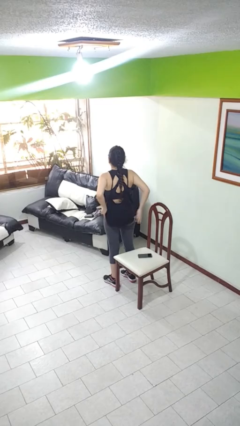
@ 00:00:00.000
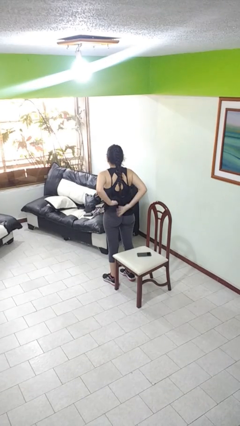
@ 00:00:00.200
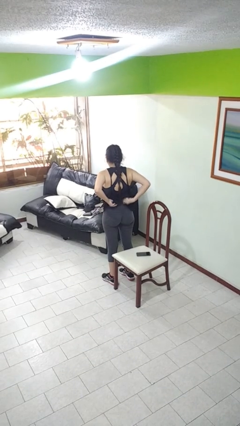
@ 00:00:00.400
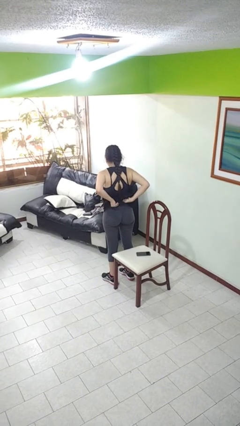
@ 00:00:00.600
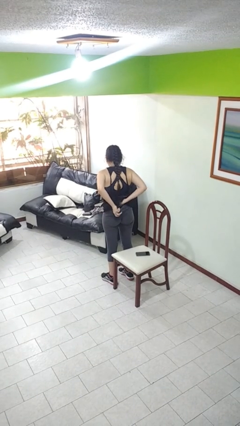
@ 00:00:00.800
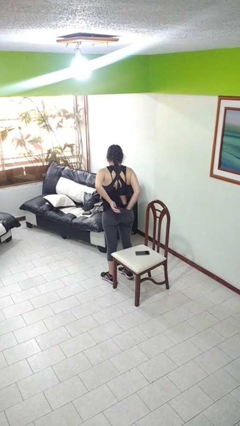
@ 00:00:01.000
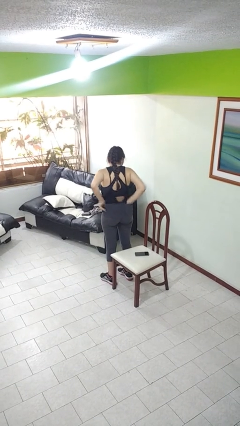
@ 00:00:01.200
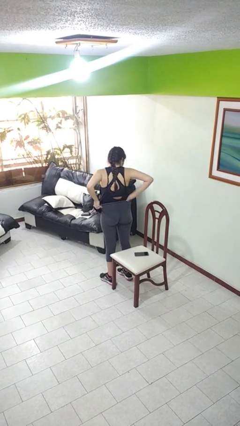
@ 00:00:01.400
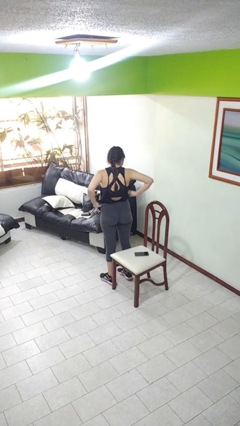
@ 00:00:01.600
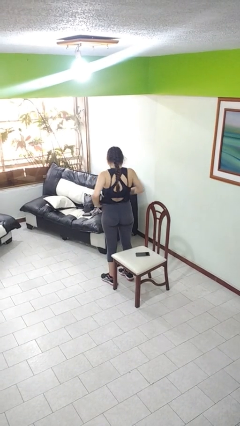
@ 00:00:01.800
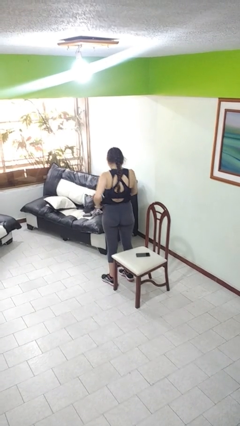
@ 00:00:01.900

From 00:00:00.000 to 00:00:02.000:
person tucks in shirt

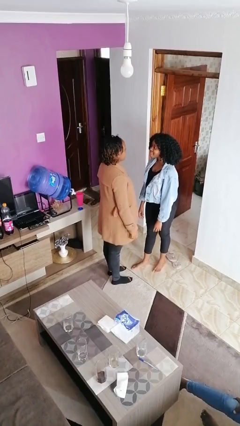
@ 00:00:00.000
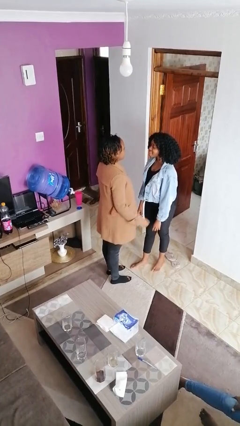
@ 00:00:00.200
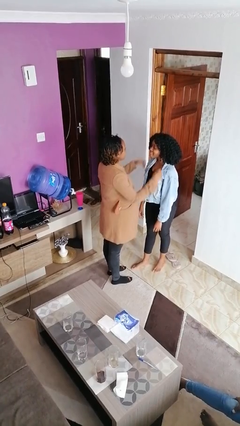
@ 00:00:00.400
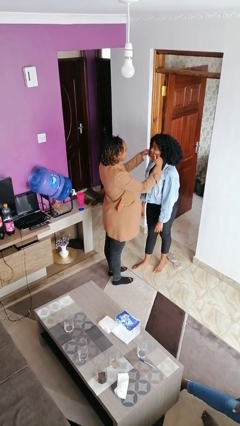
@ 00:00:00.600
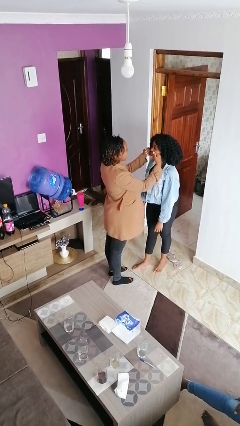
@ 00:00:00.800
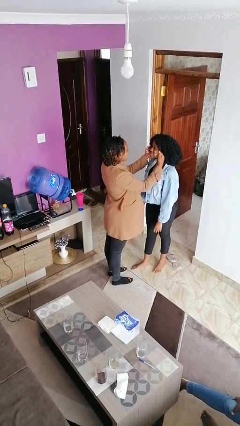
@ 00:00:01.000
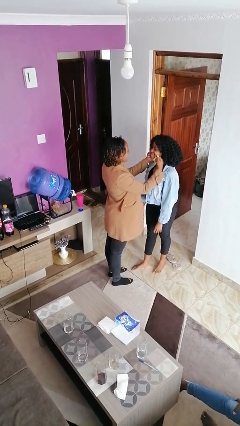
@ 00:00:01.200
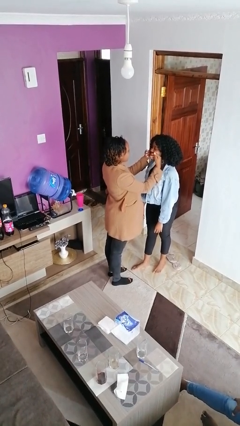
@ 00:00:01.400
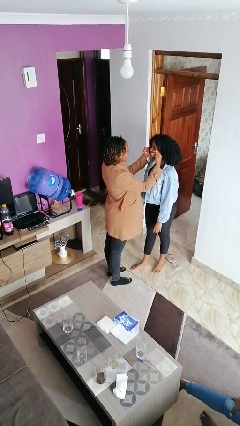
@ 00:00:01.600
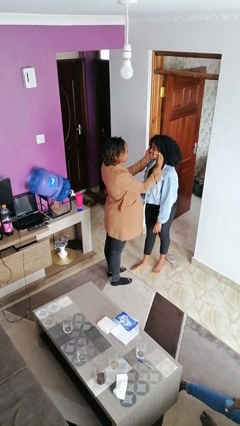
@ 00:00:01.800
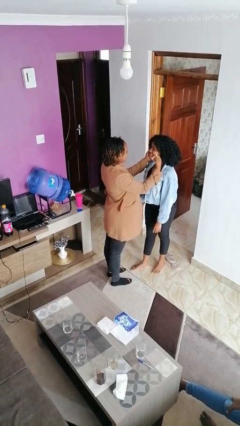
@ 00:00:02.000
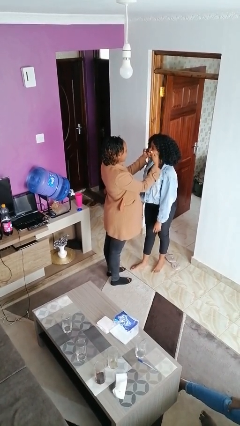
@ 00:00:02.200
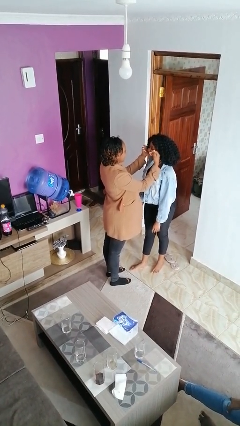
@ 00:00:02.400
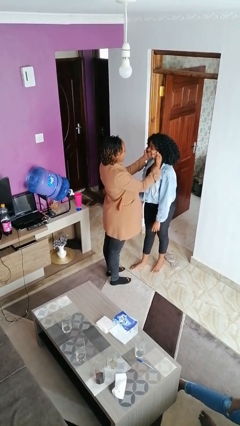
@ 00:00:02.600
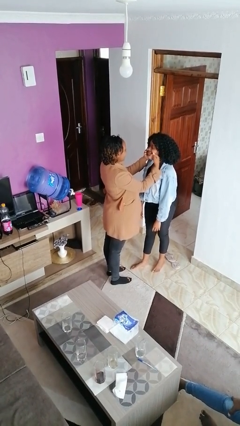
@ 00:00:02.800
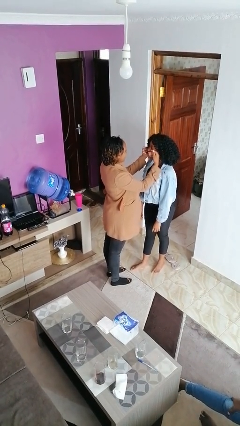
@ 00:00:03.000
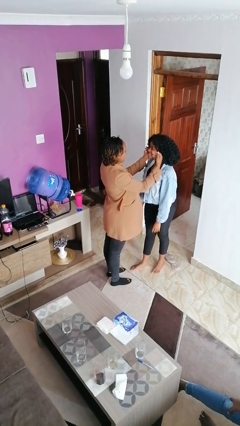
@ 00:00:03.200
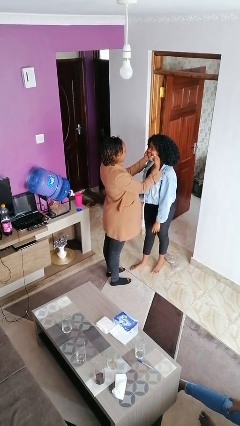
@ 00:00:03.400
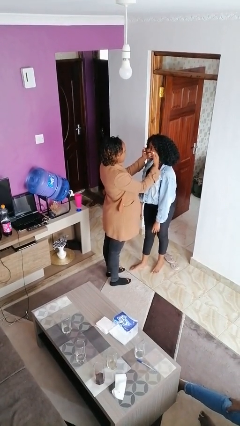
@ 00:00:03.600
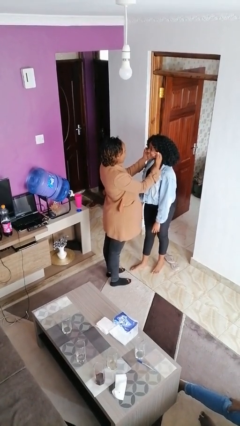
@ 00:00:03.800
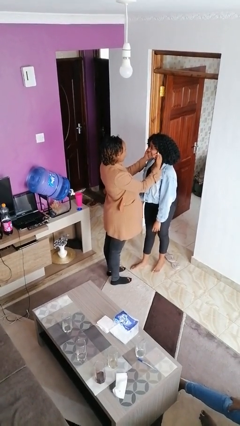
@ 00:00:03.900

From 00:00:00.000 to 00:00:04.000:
person touches face of person

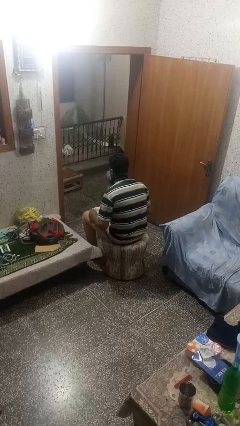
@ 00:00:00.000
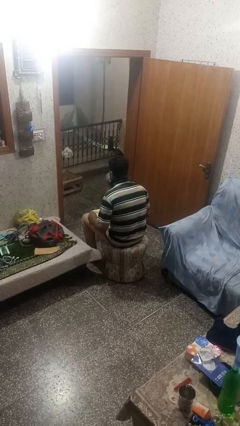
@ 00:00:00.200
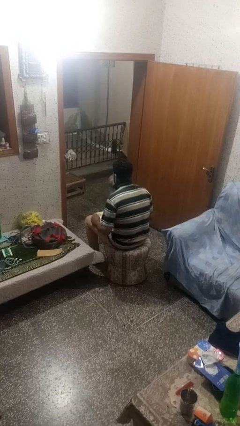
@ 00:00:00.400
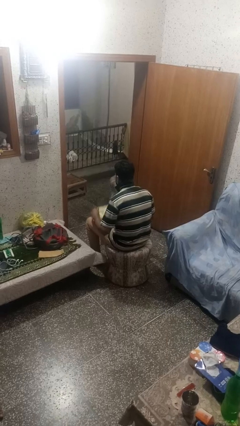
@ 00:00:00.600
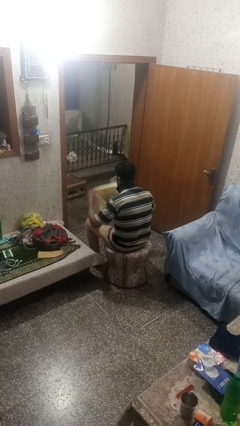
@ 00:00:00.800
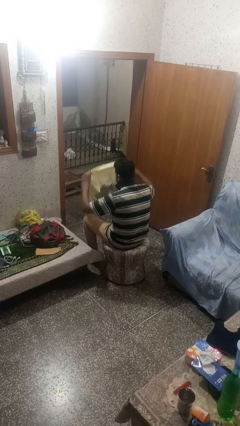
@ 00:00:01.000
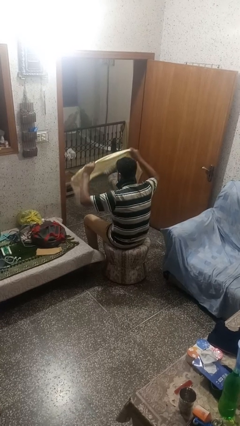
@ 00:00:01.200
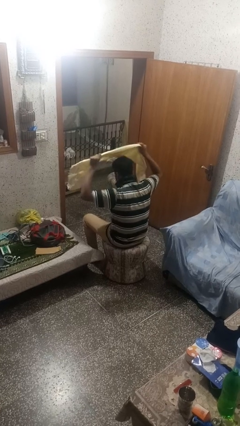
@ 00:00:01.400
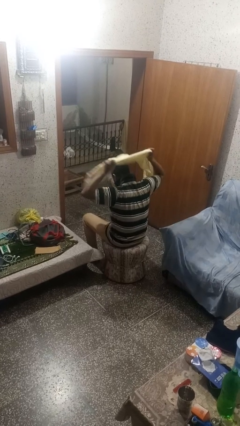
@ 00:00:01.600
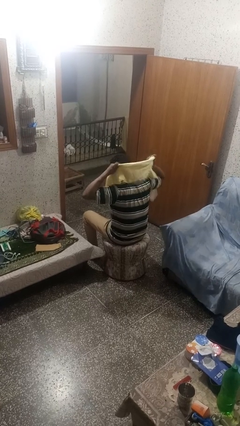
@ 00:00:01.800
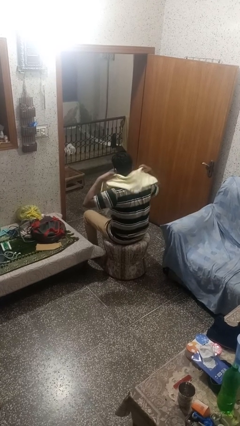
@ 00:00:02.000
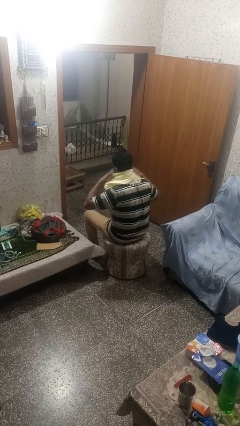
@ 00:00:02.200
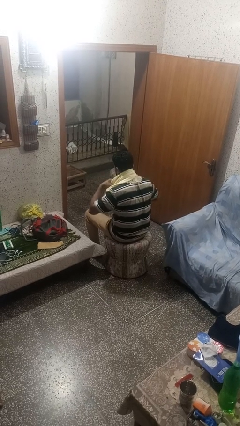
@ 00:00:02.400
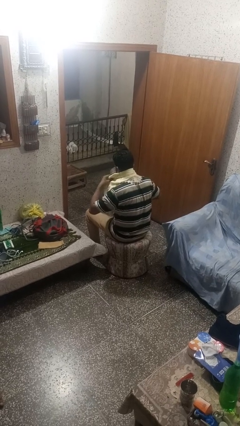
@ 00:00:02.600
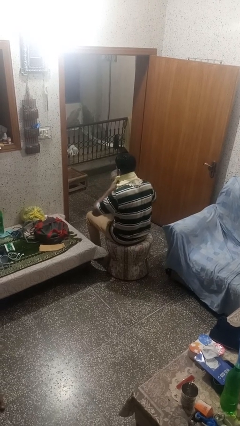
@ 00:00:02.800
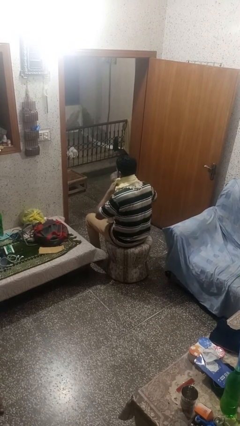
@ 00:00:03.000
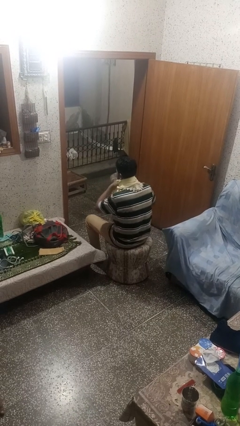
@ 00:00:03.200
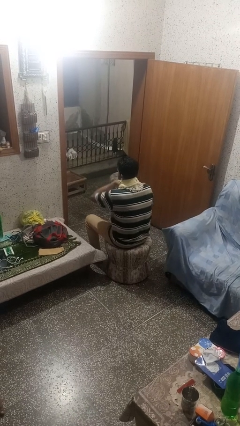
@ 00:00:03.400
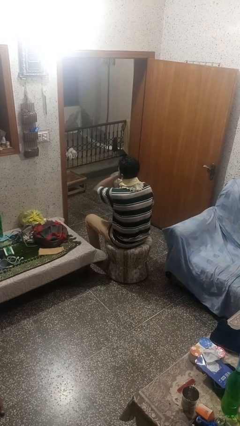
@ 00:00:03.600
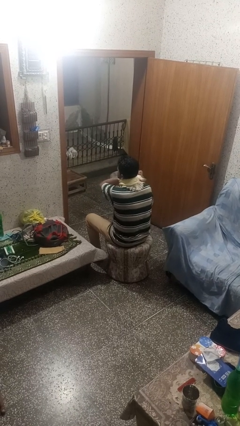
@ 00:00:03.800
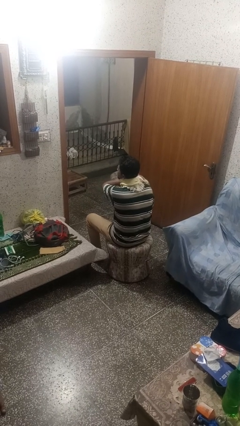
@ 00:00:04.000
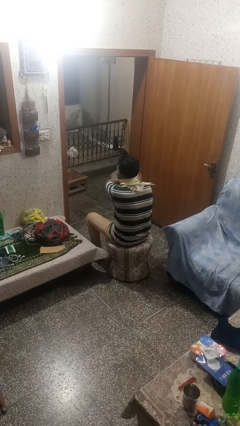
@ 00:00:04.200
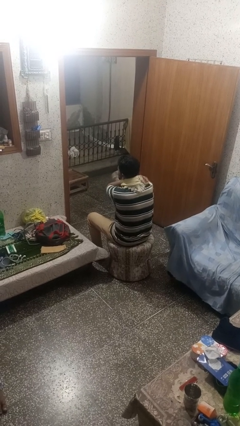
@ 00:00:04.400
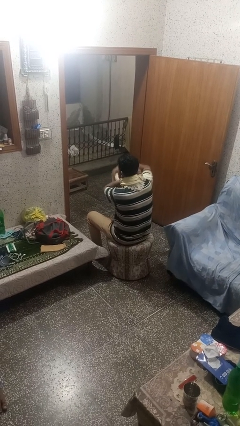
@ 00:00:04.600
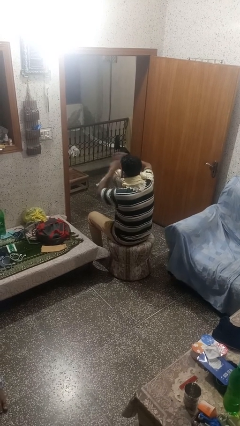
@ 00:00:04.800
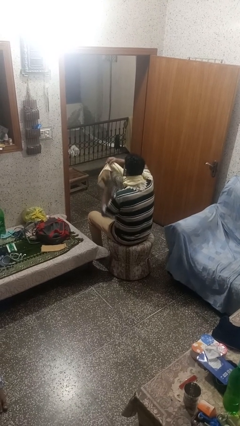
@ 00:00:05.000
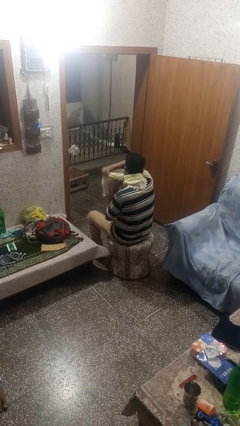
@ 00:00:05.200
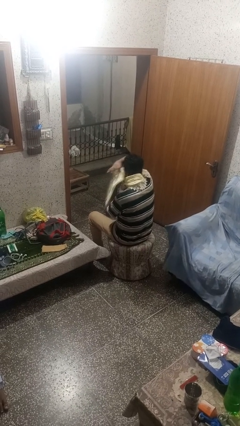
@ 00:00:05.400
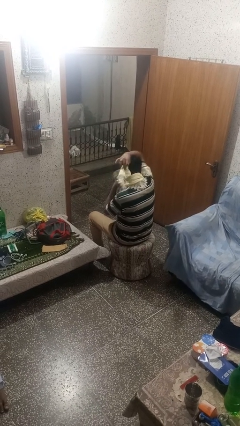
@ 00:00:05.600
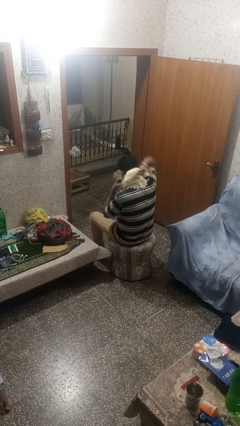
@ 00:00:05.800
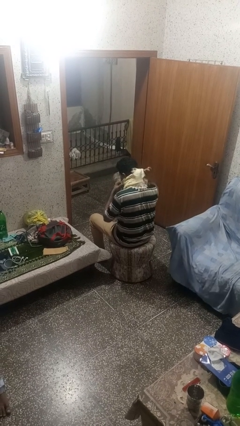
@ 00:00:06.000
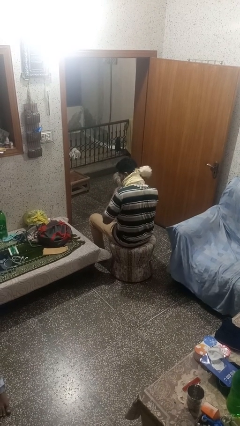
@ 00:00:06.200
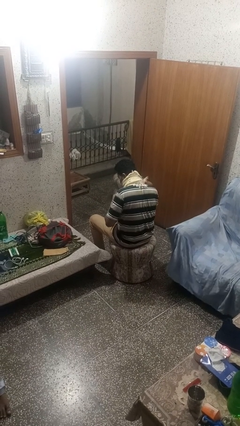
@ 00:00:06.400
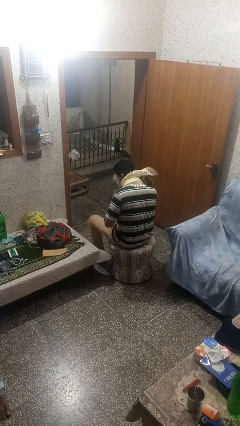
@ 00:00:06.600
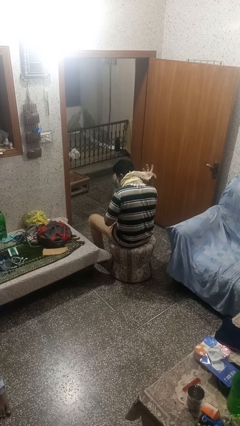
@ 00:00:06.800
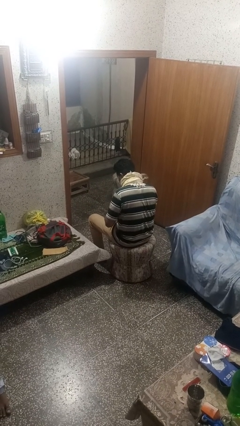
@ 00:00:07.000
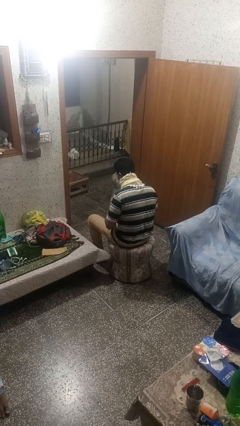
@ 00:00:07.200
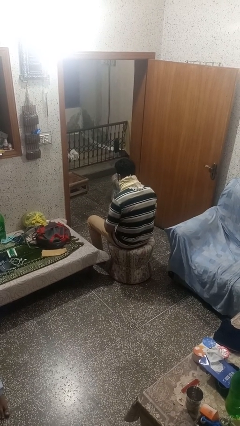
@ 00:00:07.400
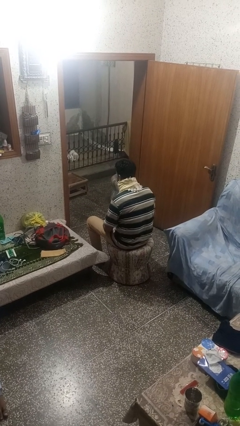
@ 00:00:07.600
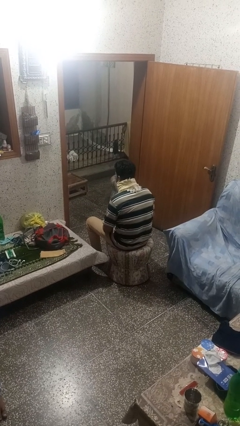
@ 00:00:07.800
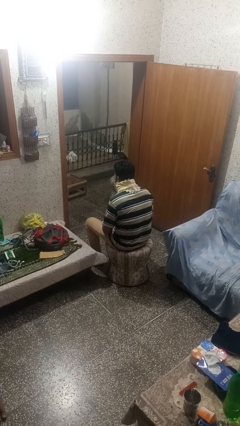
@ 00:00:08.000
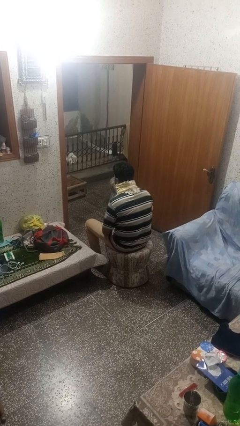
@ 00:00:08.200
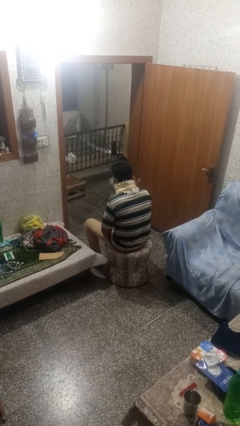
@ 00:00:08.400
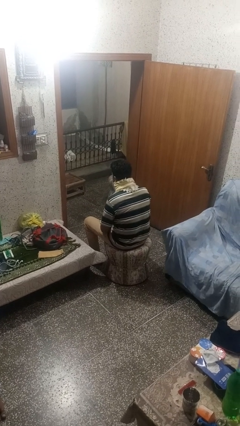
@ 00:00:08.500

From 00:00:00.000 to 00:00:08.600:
person puts on scarf

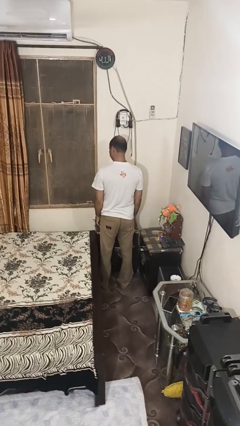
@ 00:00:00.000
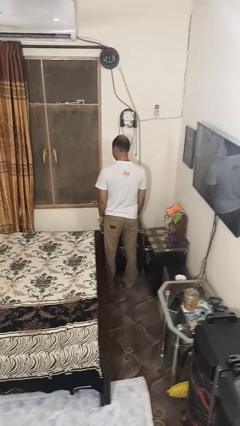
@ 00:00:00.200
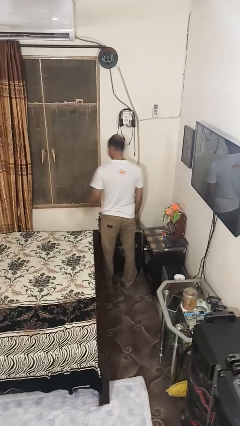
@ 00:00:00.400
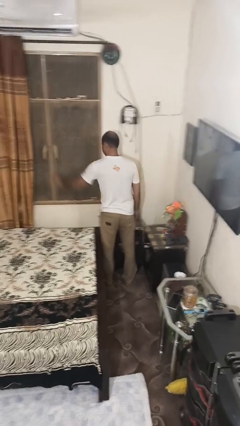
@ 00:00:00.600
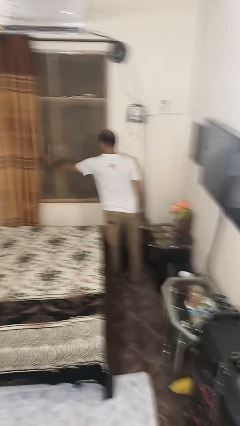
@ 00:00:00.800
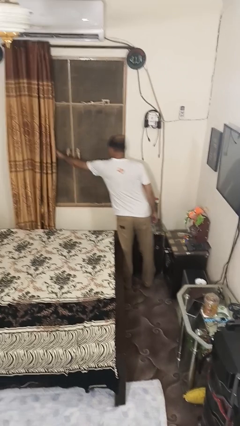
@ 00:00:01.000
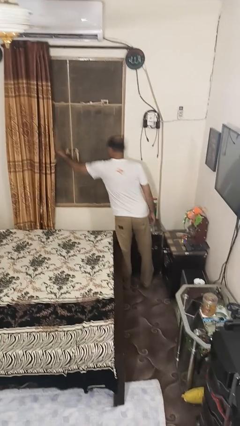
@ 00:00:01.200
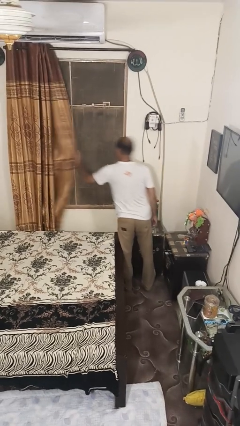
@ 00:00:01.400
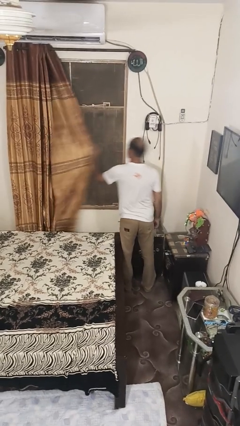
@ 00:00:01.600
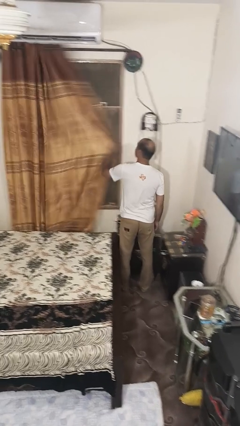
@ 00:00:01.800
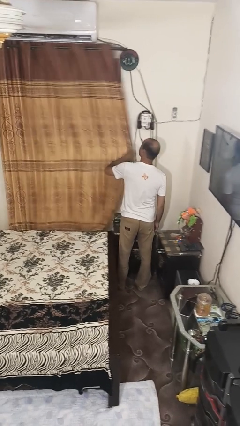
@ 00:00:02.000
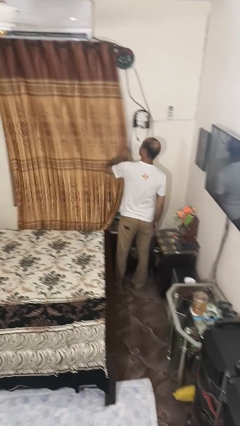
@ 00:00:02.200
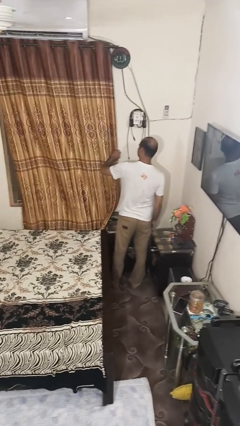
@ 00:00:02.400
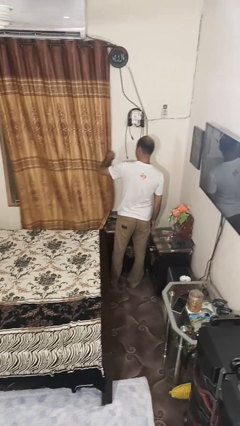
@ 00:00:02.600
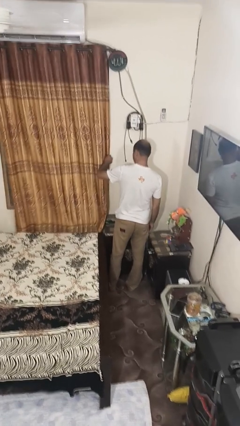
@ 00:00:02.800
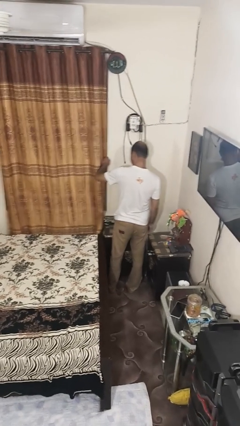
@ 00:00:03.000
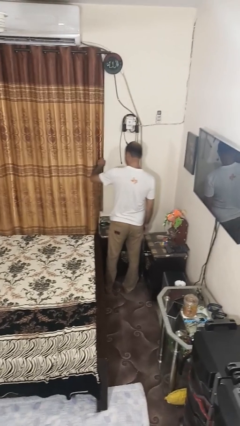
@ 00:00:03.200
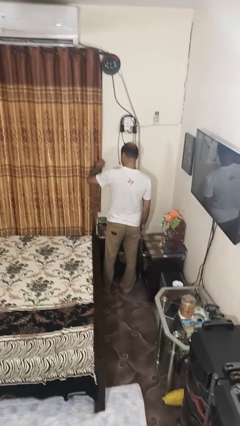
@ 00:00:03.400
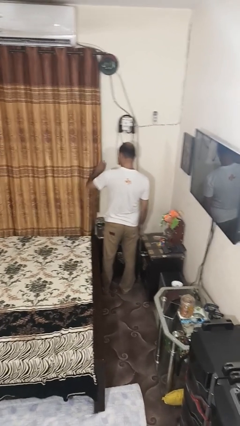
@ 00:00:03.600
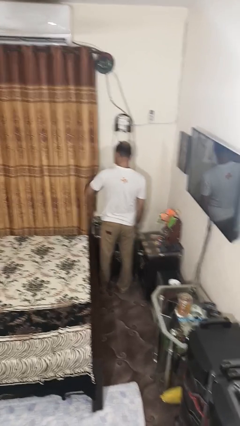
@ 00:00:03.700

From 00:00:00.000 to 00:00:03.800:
person closes curtains
